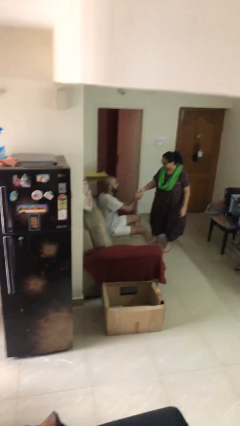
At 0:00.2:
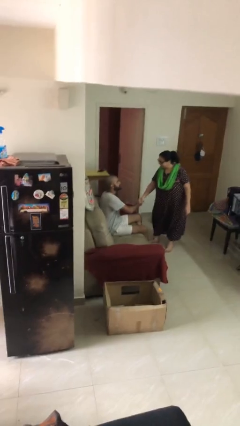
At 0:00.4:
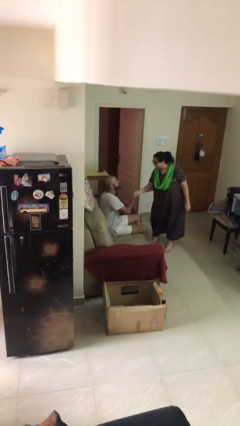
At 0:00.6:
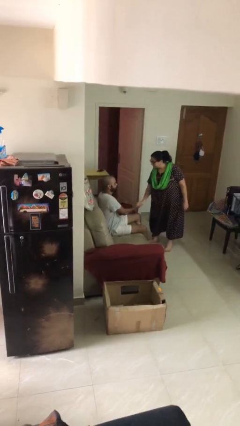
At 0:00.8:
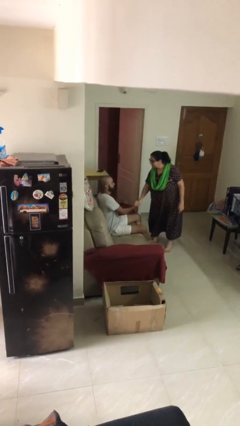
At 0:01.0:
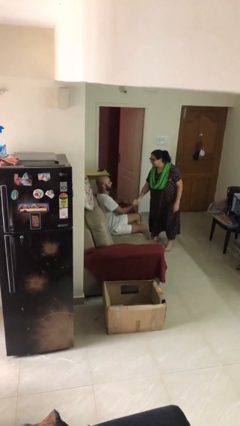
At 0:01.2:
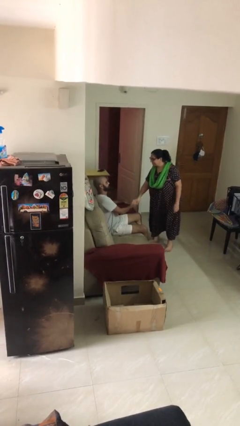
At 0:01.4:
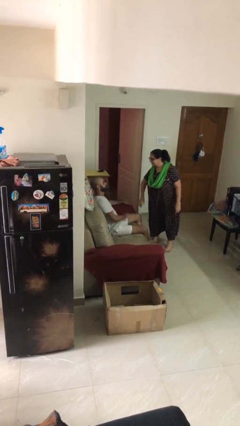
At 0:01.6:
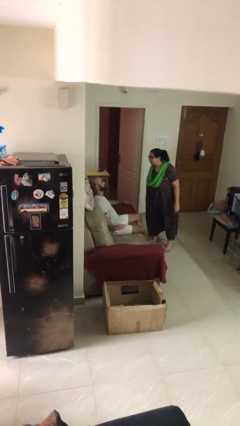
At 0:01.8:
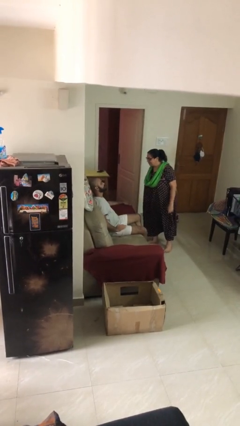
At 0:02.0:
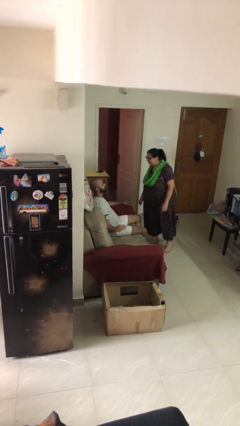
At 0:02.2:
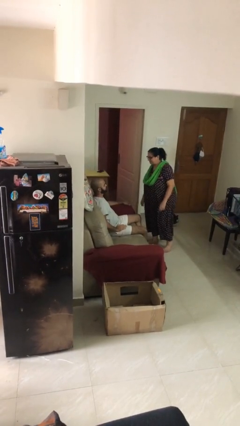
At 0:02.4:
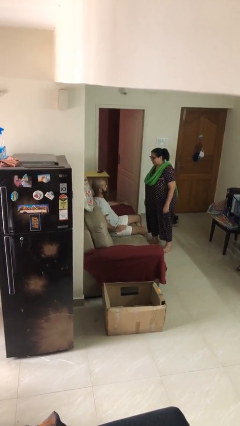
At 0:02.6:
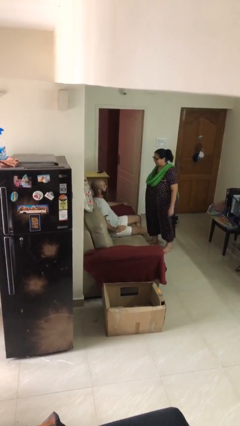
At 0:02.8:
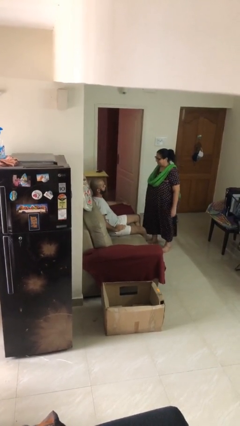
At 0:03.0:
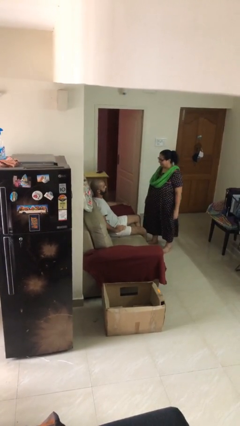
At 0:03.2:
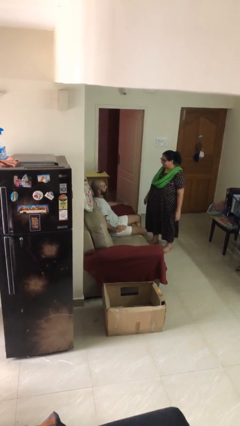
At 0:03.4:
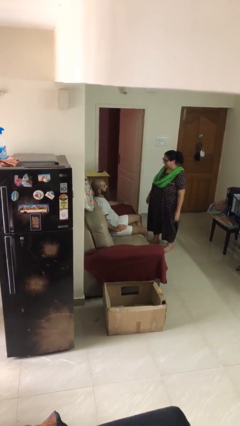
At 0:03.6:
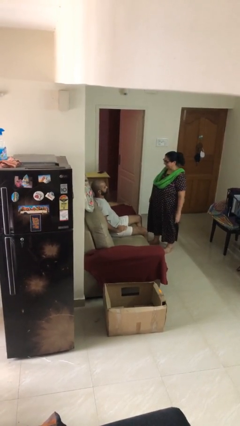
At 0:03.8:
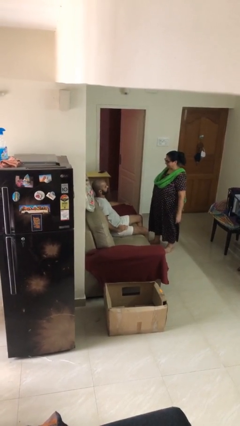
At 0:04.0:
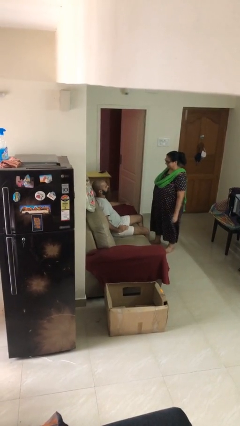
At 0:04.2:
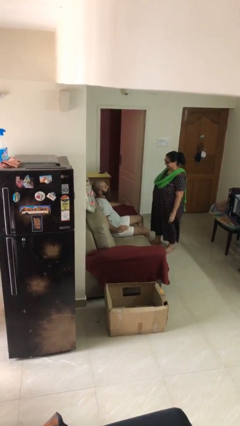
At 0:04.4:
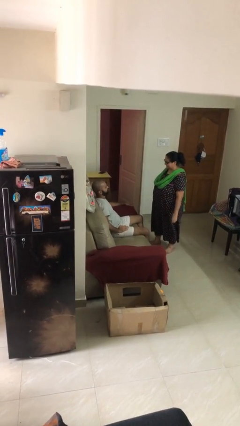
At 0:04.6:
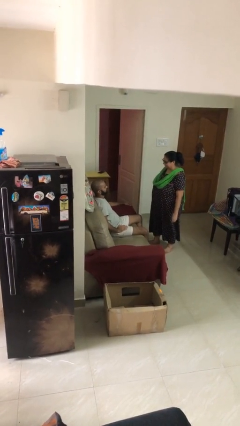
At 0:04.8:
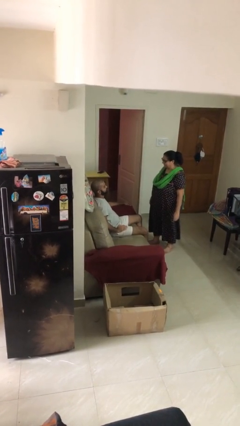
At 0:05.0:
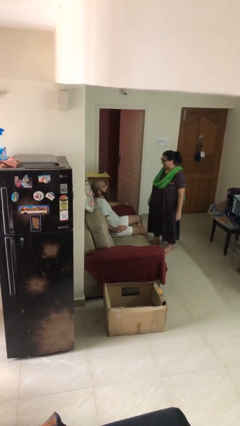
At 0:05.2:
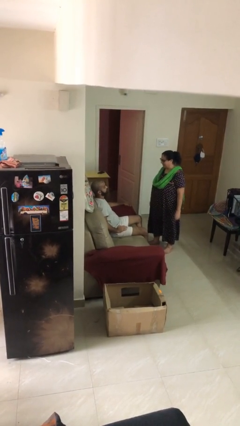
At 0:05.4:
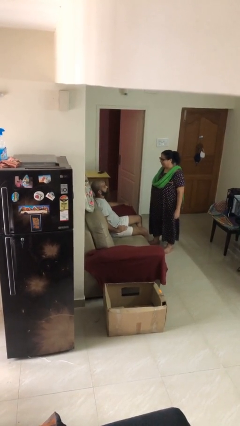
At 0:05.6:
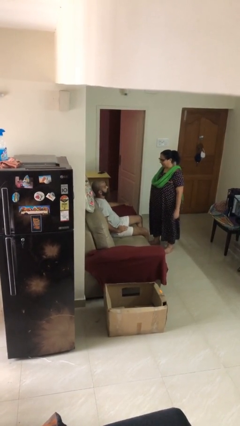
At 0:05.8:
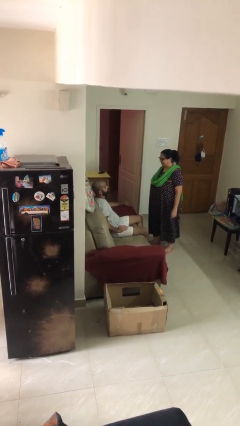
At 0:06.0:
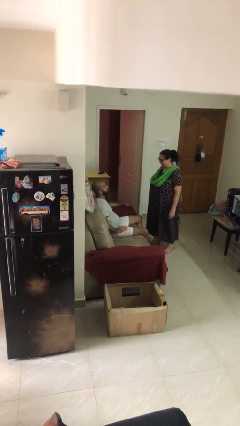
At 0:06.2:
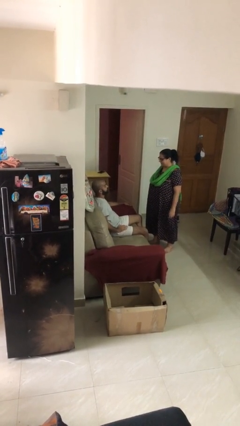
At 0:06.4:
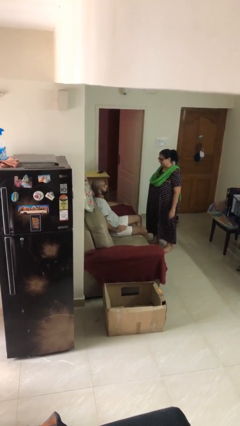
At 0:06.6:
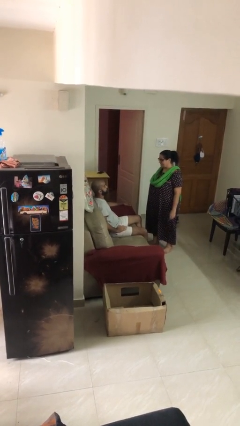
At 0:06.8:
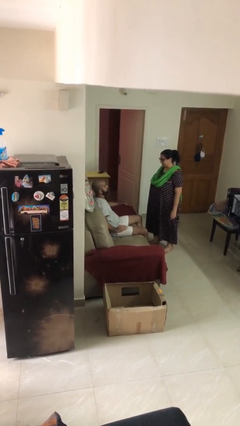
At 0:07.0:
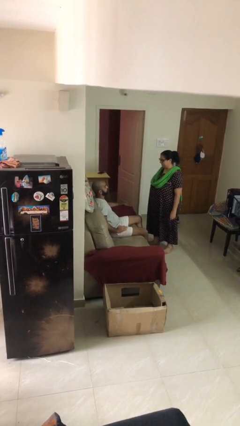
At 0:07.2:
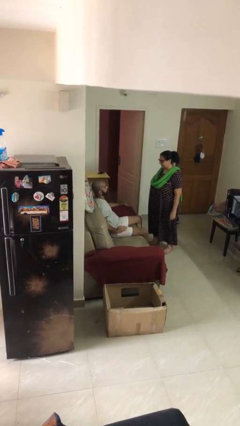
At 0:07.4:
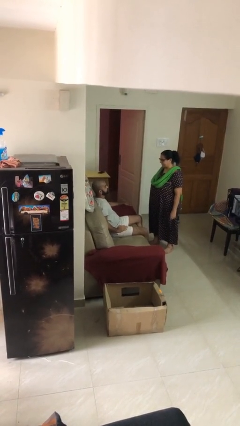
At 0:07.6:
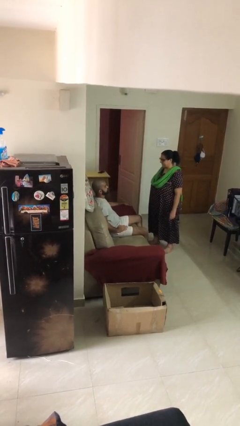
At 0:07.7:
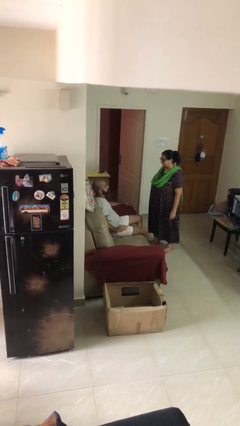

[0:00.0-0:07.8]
person shakes hand

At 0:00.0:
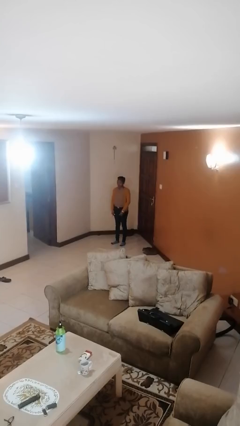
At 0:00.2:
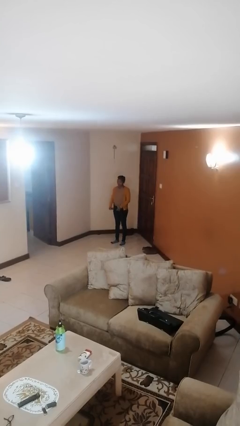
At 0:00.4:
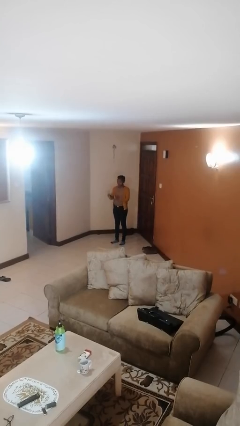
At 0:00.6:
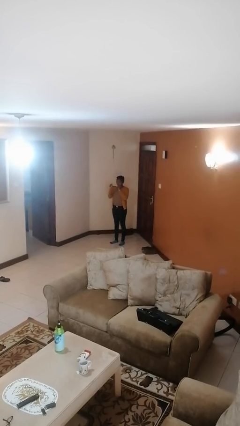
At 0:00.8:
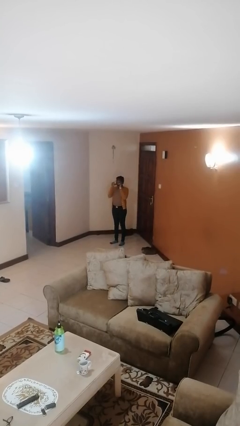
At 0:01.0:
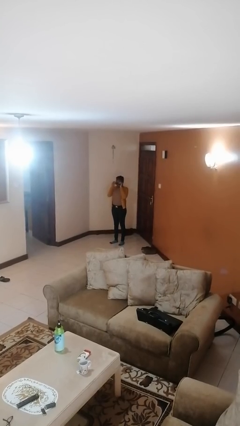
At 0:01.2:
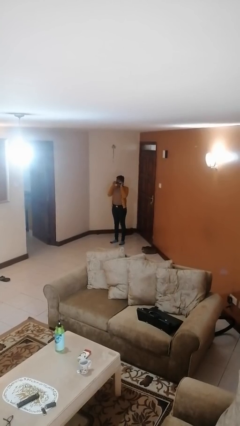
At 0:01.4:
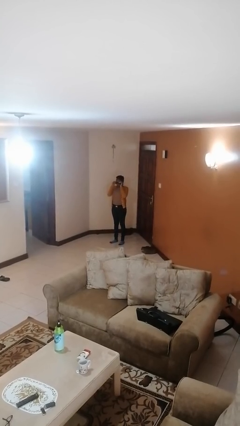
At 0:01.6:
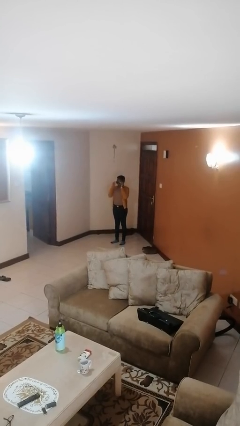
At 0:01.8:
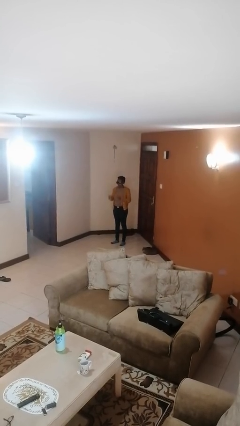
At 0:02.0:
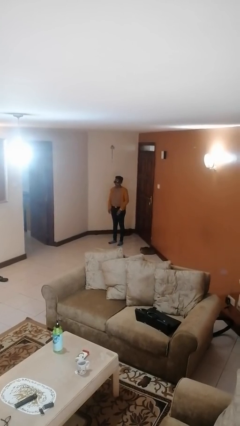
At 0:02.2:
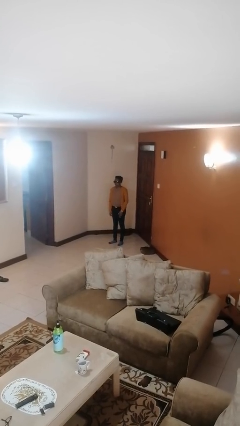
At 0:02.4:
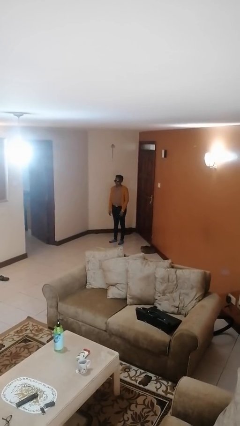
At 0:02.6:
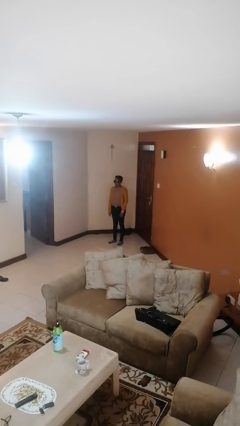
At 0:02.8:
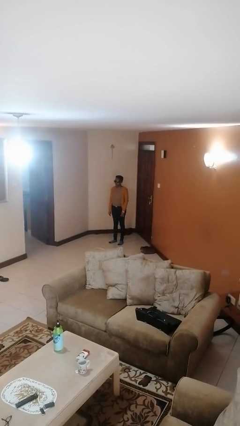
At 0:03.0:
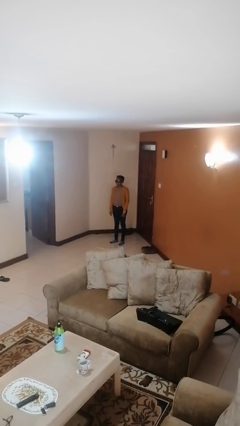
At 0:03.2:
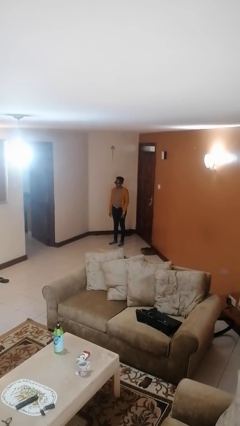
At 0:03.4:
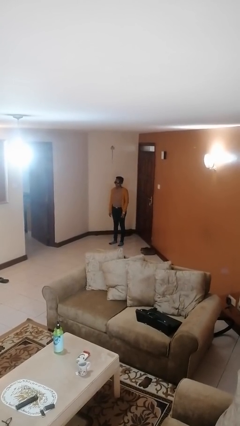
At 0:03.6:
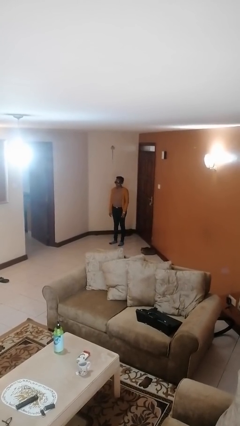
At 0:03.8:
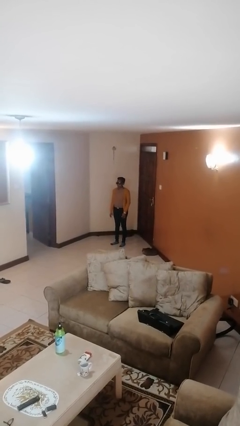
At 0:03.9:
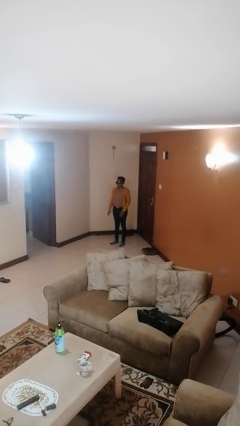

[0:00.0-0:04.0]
person puts on sunglasses

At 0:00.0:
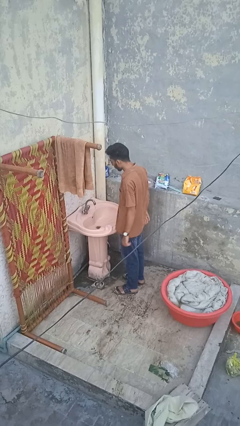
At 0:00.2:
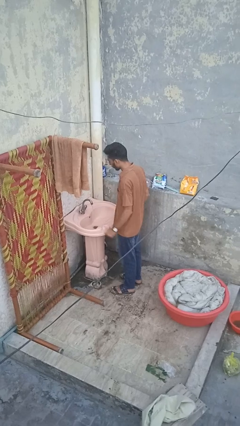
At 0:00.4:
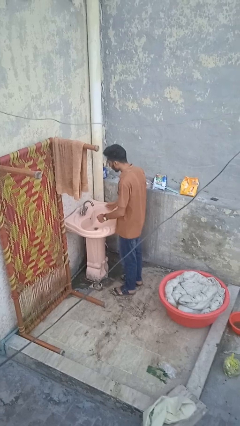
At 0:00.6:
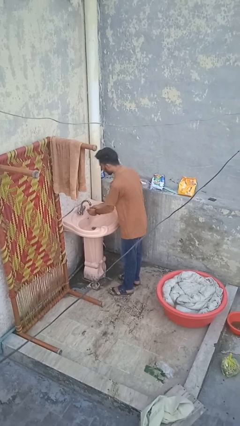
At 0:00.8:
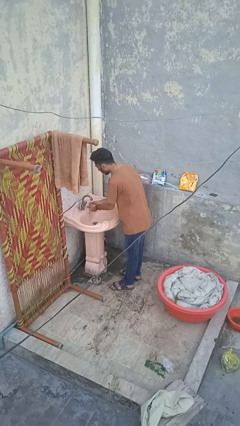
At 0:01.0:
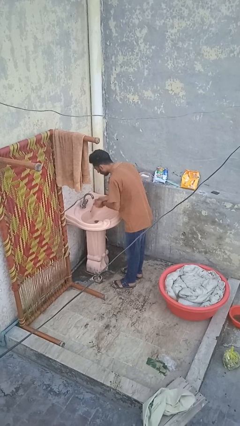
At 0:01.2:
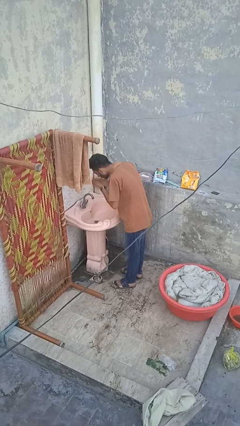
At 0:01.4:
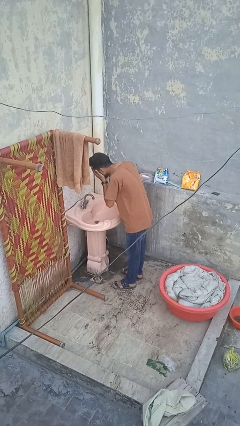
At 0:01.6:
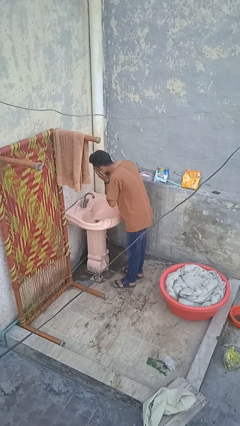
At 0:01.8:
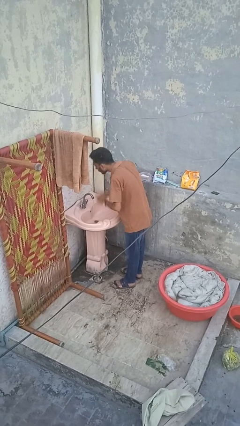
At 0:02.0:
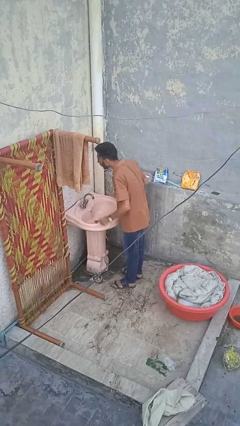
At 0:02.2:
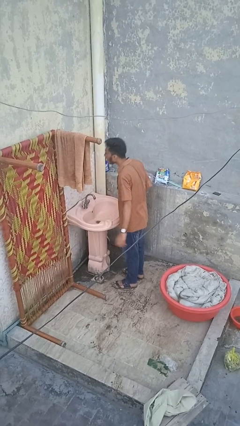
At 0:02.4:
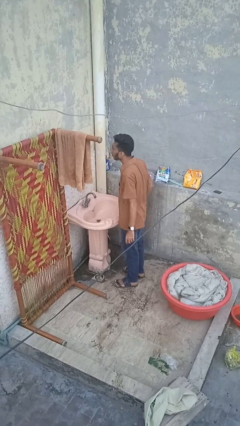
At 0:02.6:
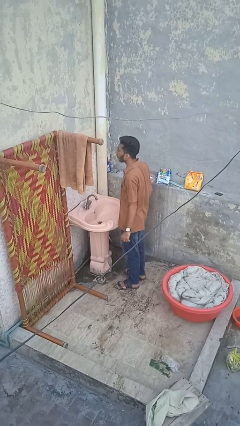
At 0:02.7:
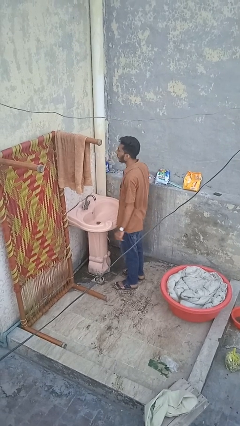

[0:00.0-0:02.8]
person washes face

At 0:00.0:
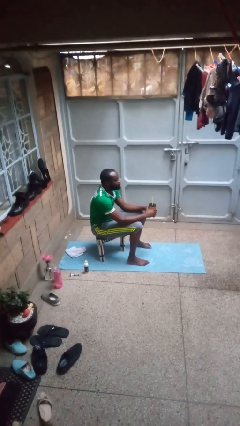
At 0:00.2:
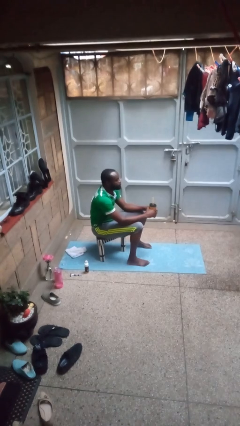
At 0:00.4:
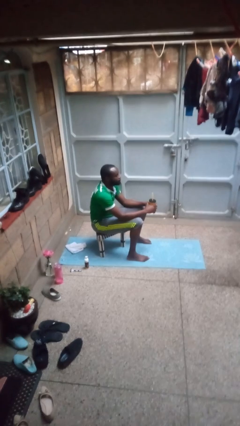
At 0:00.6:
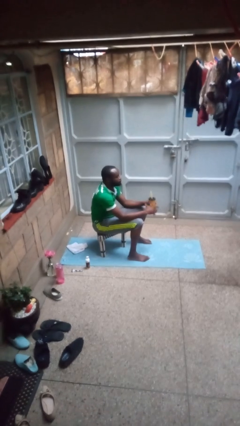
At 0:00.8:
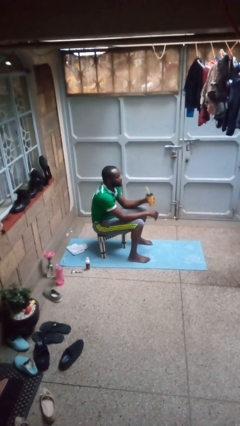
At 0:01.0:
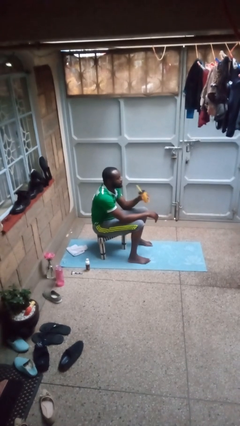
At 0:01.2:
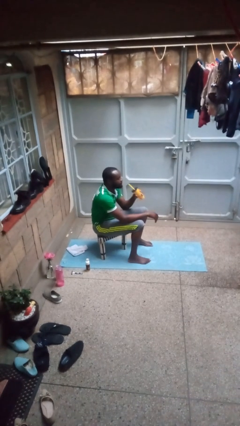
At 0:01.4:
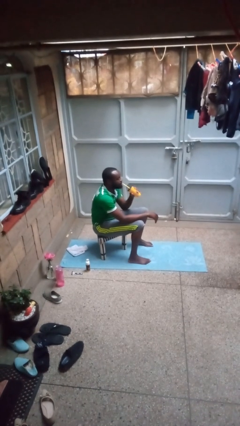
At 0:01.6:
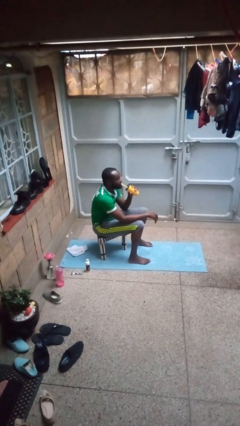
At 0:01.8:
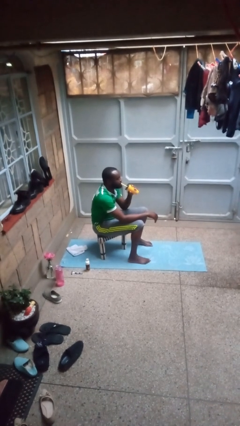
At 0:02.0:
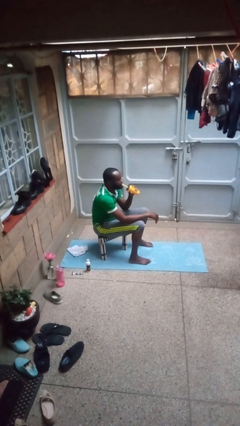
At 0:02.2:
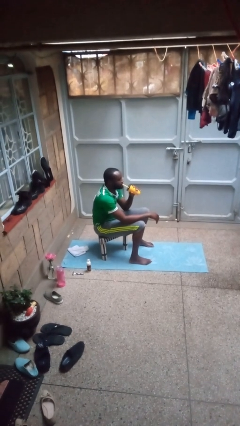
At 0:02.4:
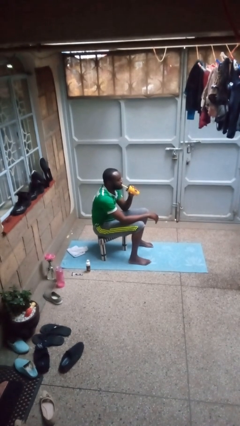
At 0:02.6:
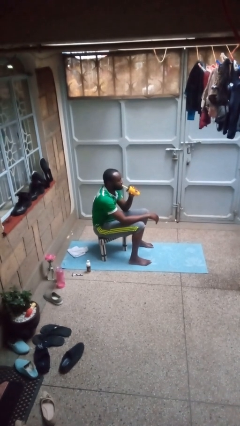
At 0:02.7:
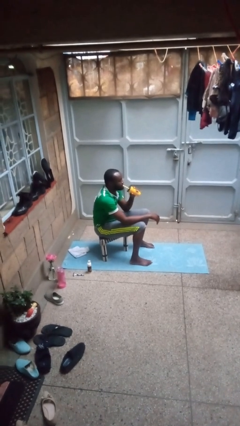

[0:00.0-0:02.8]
person drinks from straw

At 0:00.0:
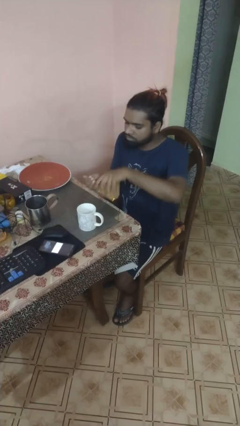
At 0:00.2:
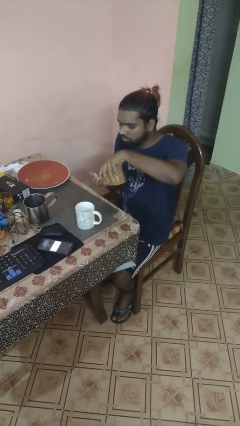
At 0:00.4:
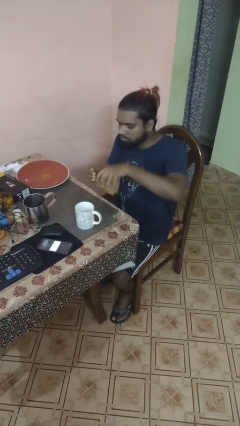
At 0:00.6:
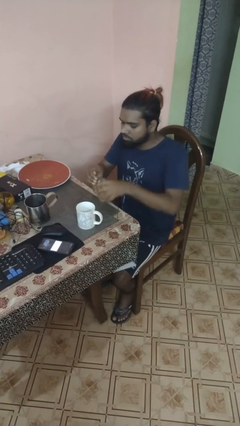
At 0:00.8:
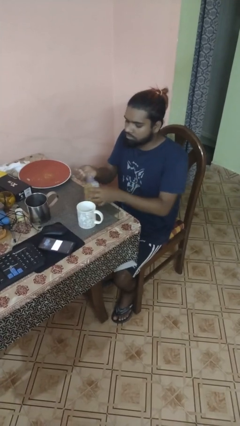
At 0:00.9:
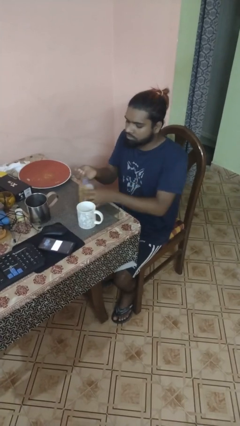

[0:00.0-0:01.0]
person takes medicine pills
